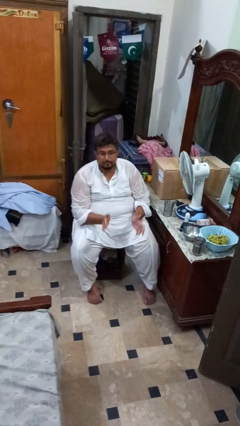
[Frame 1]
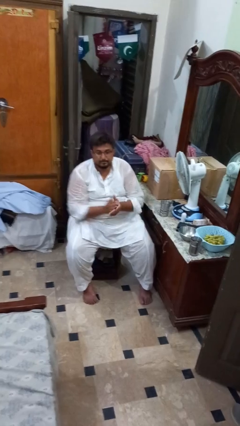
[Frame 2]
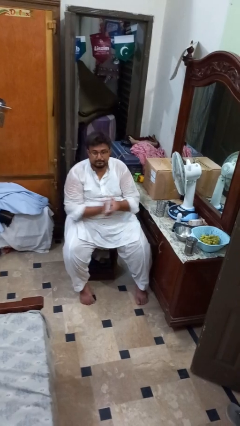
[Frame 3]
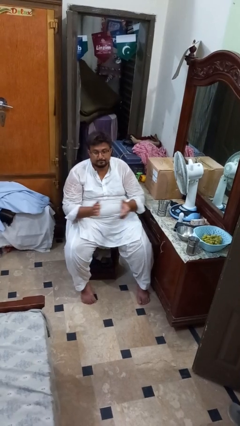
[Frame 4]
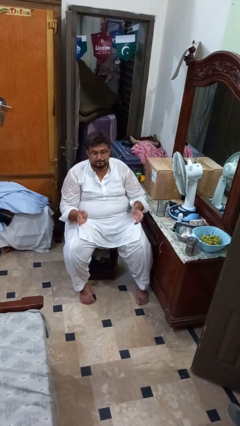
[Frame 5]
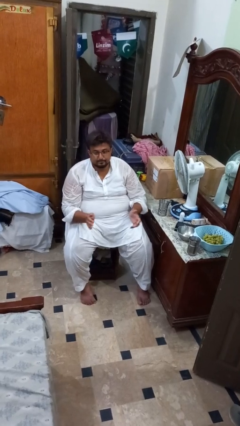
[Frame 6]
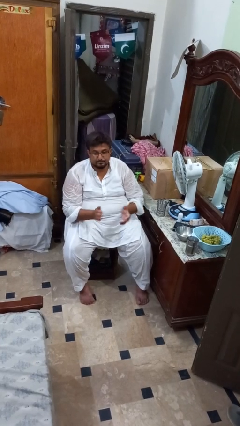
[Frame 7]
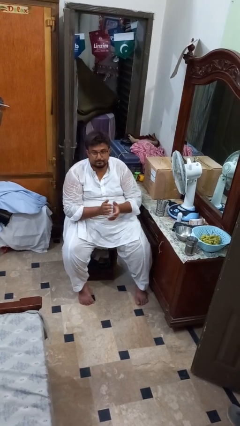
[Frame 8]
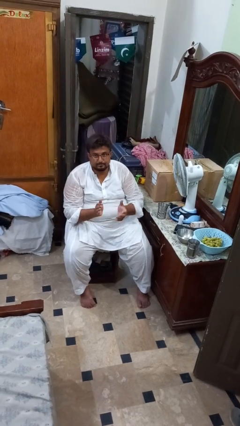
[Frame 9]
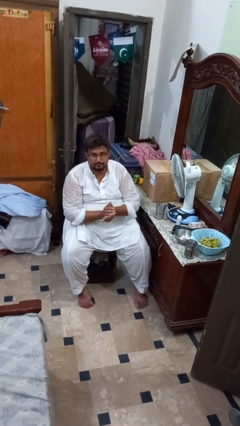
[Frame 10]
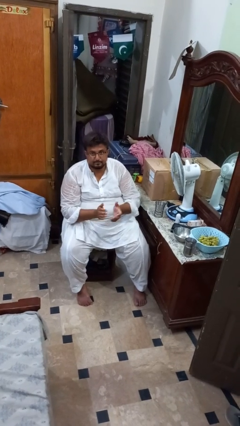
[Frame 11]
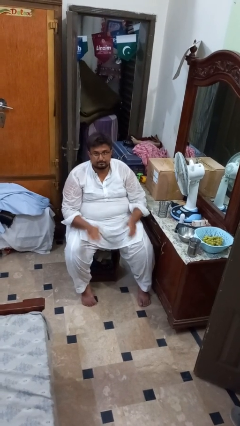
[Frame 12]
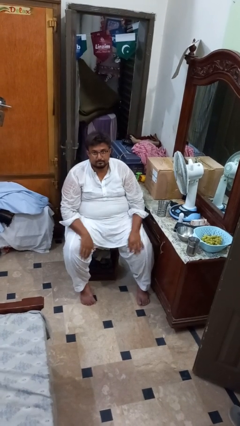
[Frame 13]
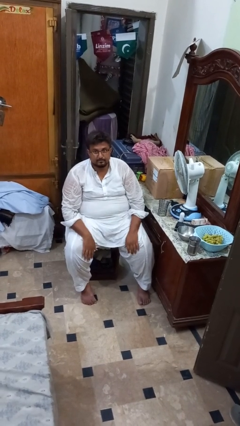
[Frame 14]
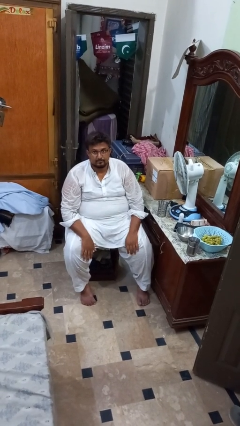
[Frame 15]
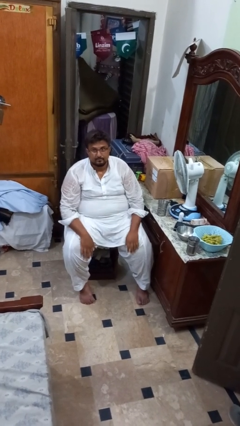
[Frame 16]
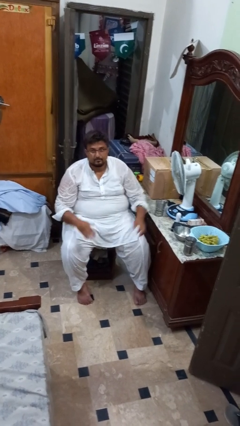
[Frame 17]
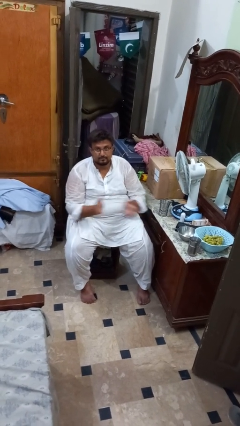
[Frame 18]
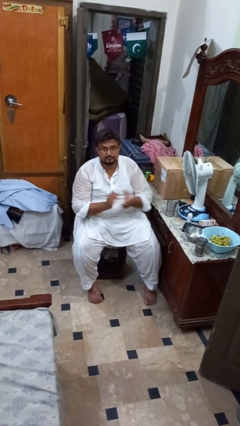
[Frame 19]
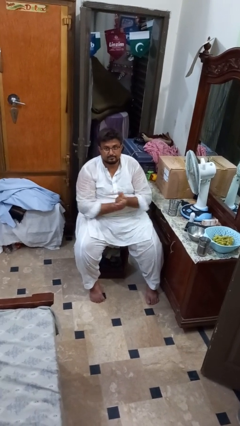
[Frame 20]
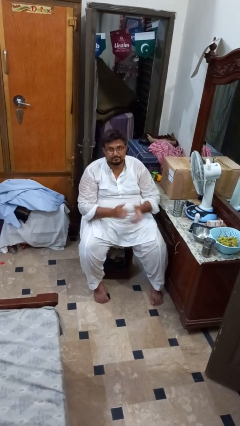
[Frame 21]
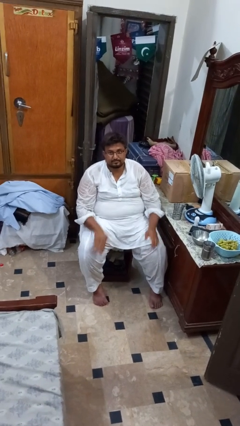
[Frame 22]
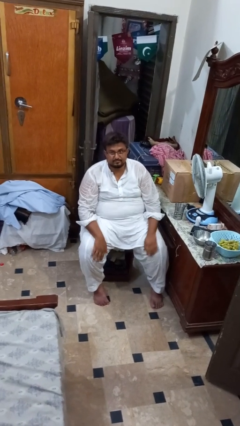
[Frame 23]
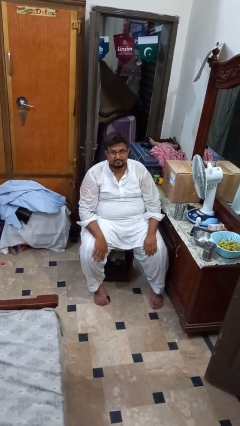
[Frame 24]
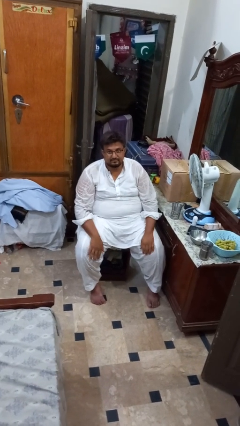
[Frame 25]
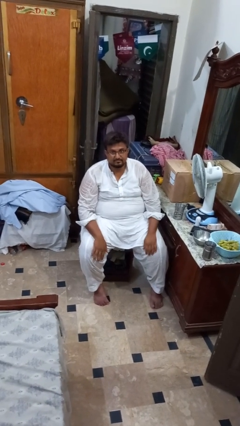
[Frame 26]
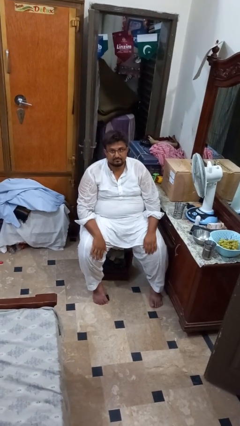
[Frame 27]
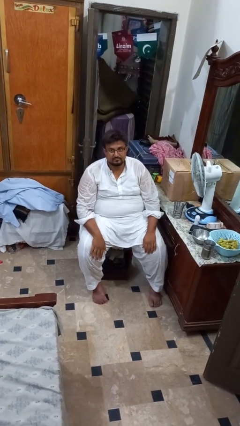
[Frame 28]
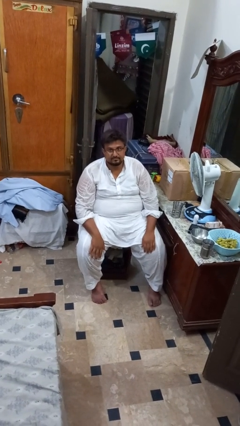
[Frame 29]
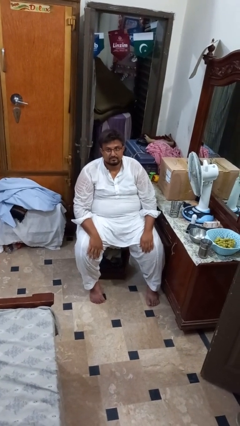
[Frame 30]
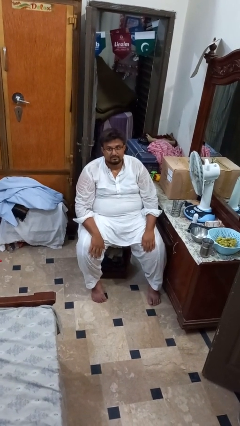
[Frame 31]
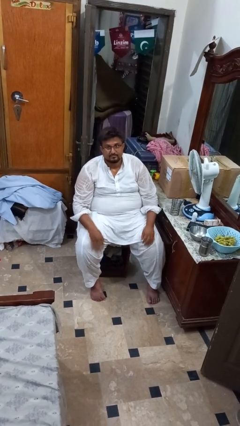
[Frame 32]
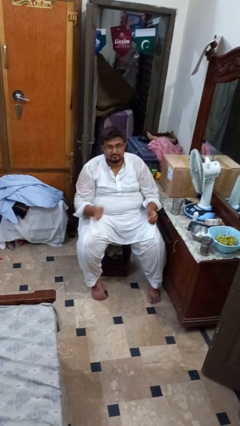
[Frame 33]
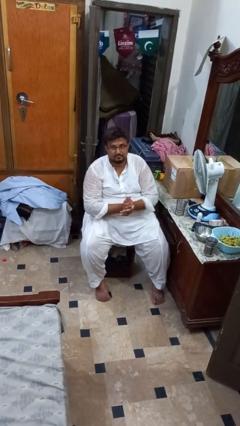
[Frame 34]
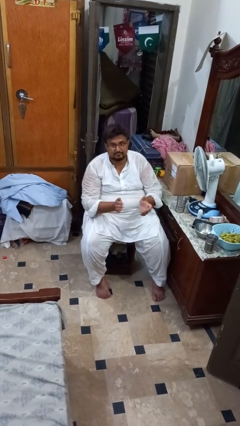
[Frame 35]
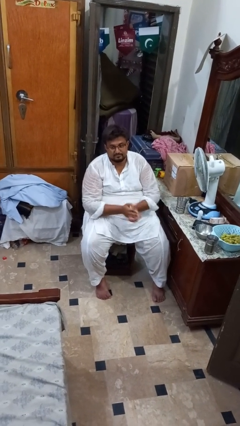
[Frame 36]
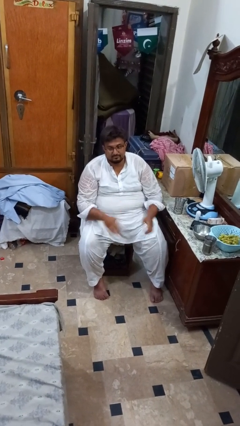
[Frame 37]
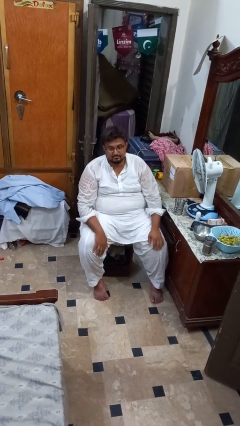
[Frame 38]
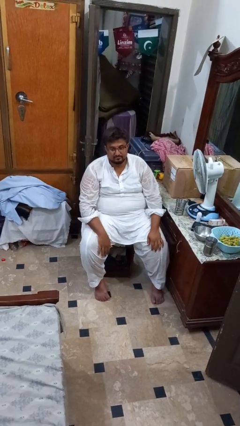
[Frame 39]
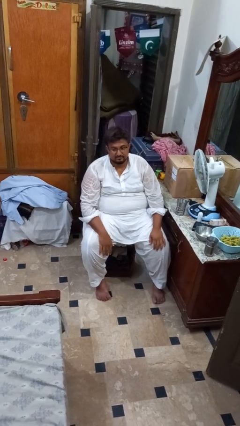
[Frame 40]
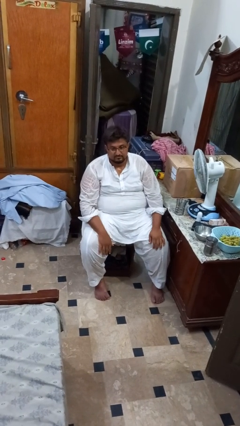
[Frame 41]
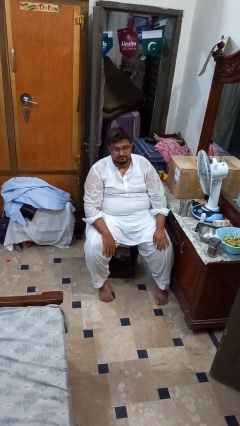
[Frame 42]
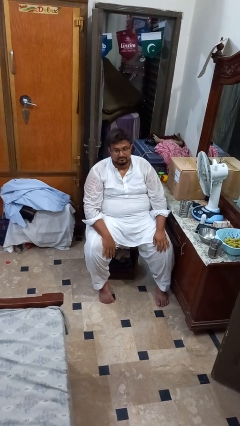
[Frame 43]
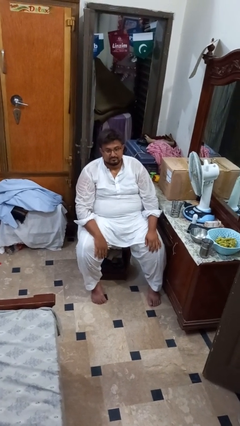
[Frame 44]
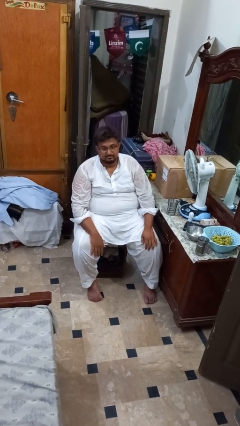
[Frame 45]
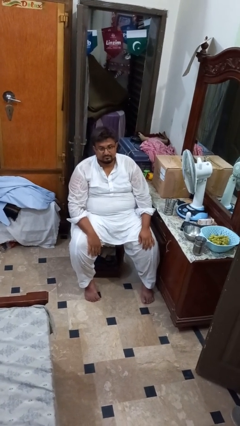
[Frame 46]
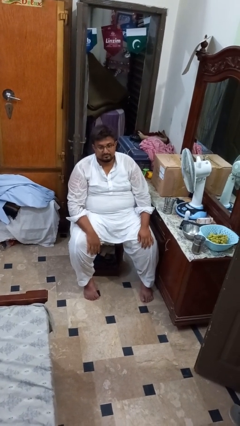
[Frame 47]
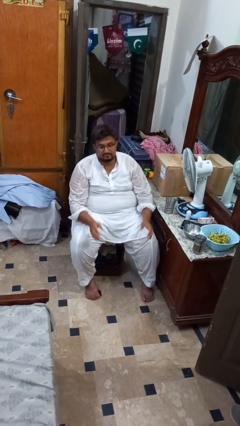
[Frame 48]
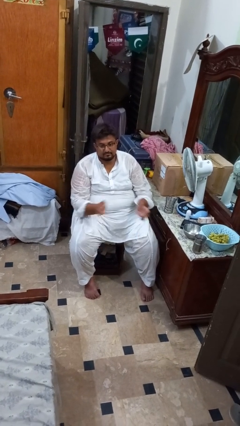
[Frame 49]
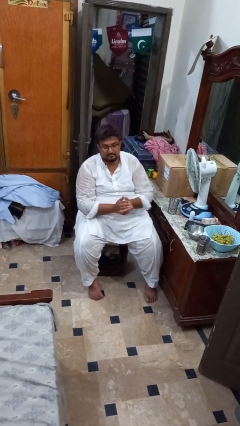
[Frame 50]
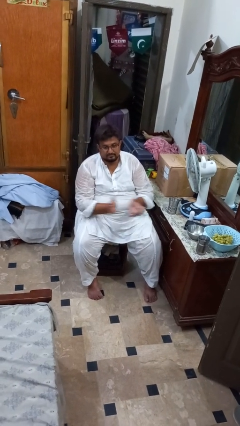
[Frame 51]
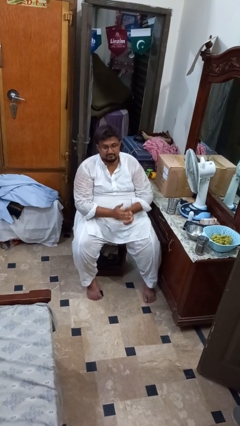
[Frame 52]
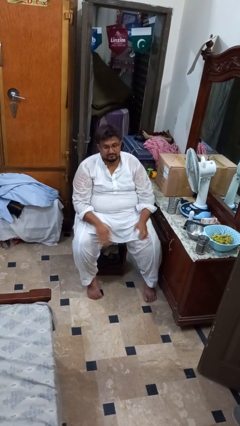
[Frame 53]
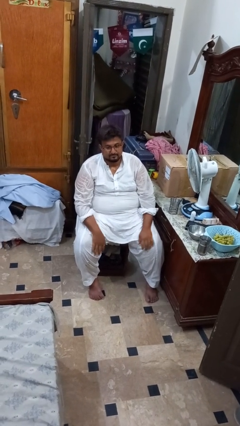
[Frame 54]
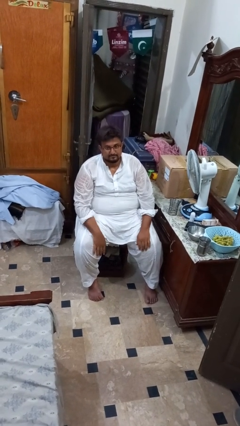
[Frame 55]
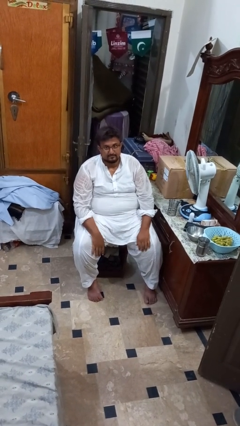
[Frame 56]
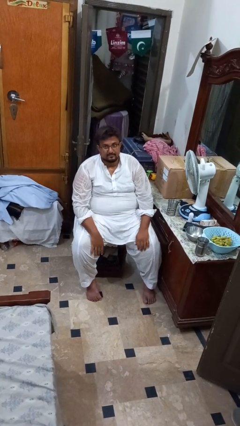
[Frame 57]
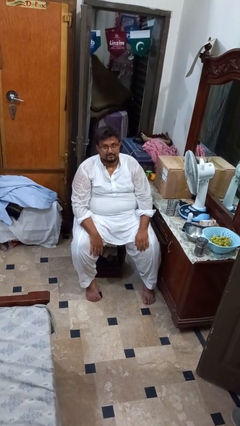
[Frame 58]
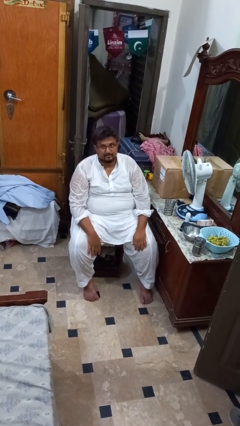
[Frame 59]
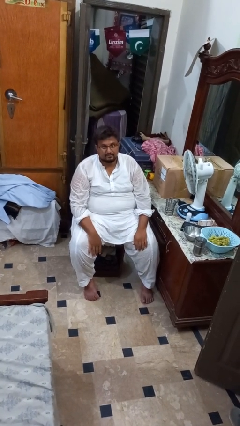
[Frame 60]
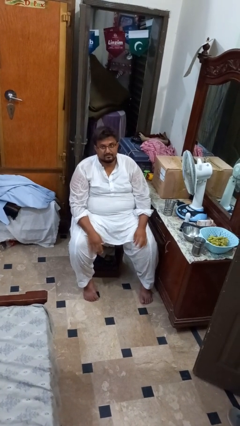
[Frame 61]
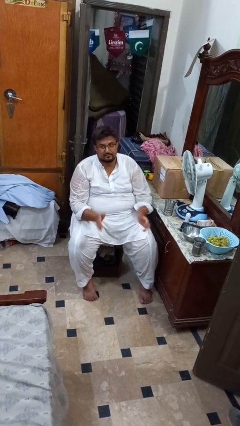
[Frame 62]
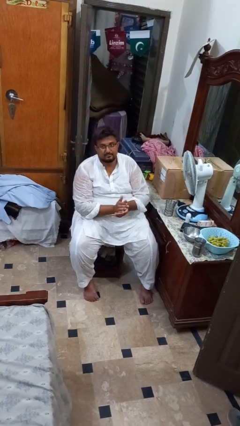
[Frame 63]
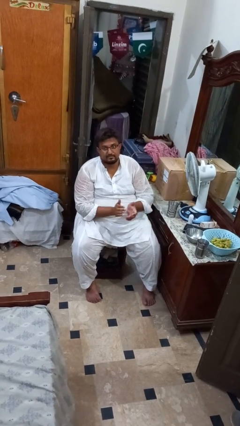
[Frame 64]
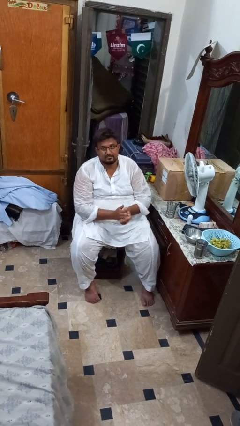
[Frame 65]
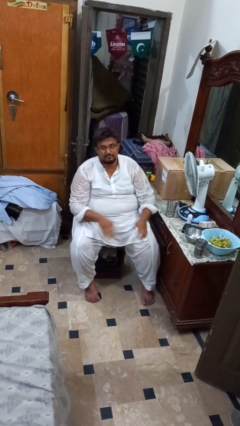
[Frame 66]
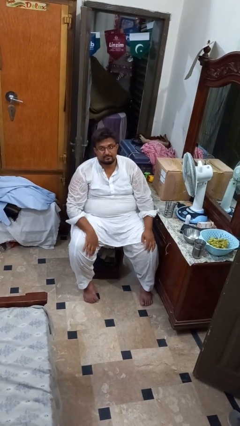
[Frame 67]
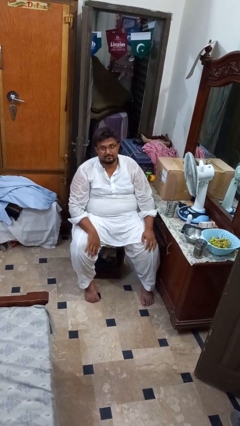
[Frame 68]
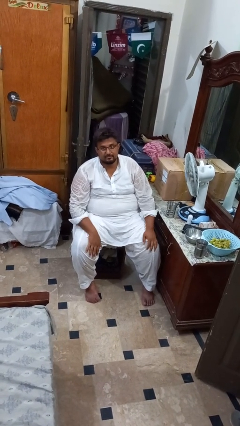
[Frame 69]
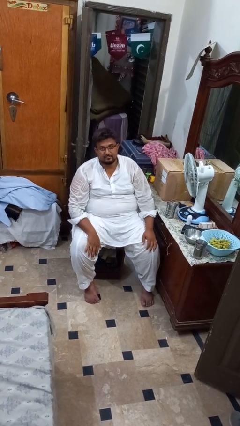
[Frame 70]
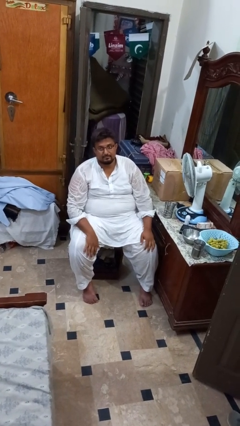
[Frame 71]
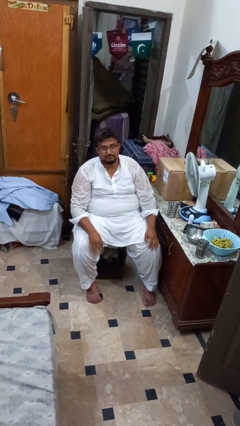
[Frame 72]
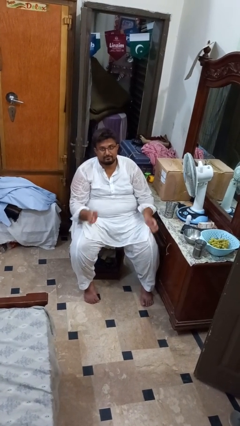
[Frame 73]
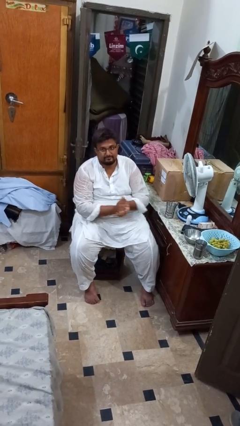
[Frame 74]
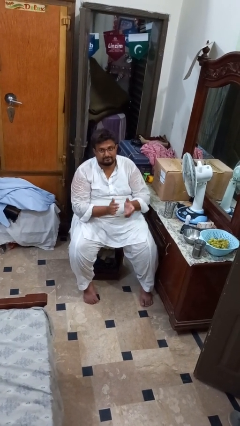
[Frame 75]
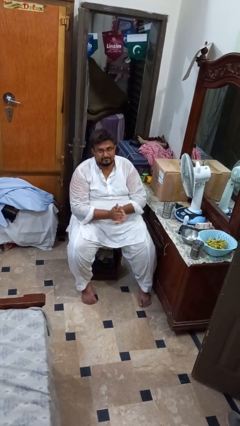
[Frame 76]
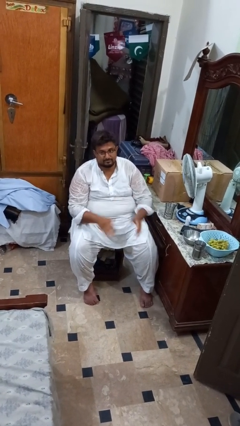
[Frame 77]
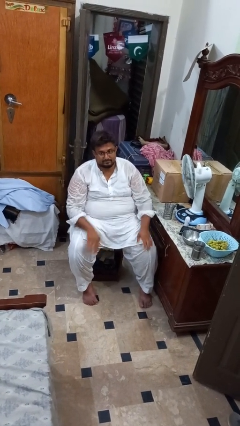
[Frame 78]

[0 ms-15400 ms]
person claps hands

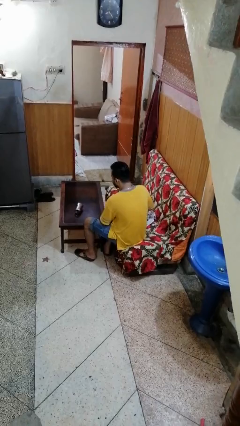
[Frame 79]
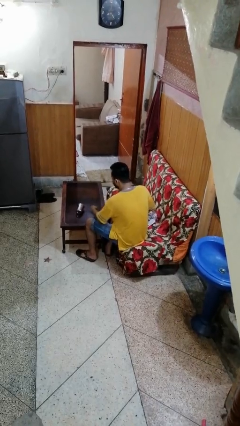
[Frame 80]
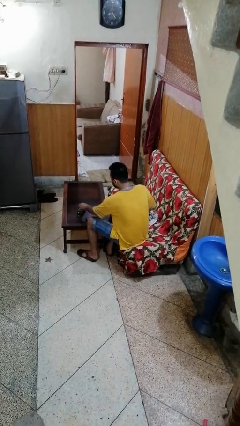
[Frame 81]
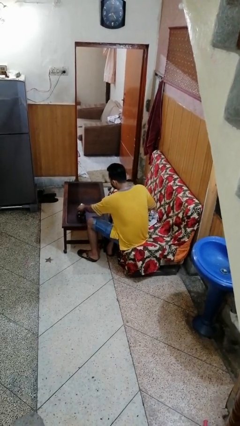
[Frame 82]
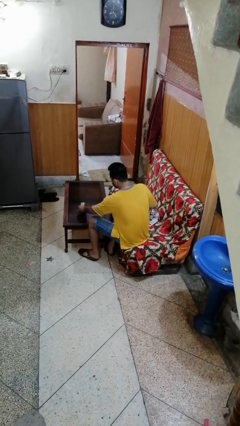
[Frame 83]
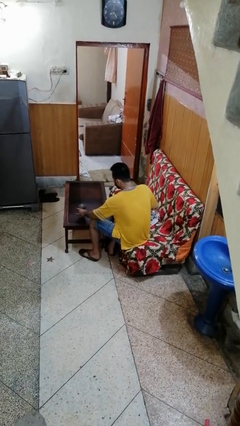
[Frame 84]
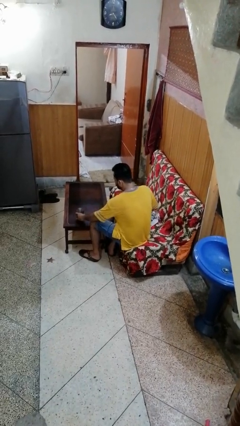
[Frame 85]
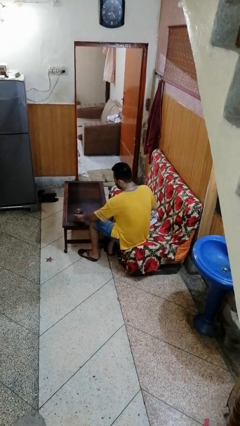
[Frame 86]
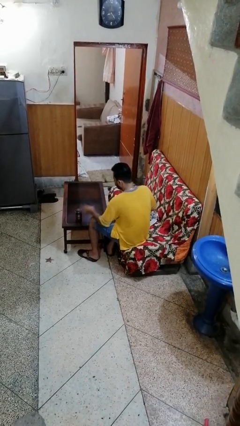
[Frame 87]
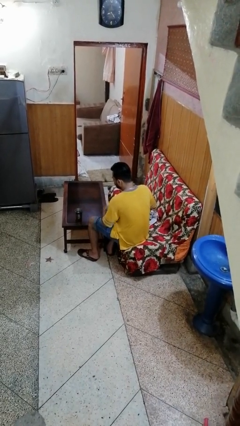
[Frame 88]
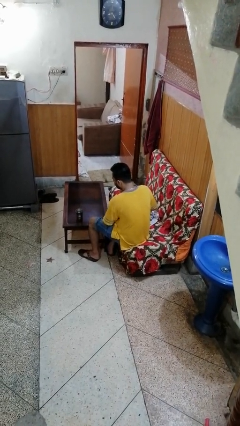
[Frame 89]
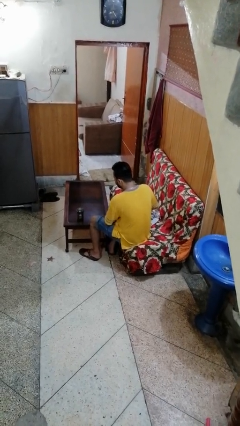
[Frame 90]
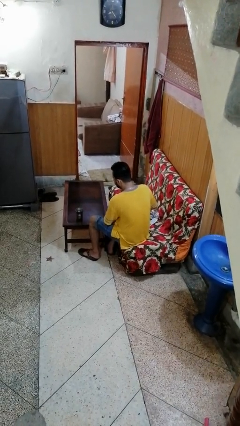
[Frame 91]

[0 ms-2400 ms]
person sets upright glass
